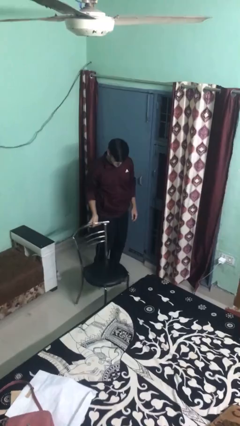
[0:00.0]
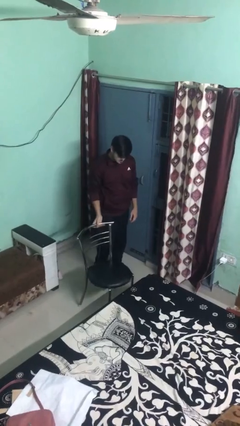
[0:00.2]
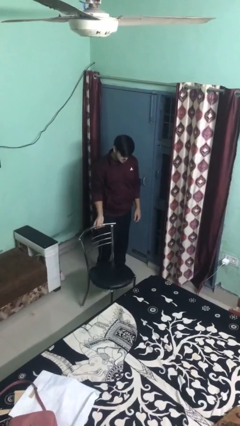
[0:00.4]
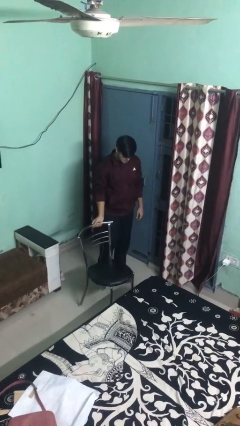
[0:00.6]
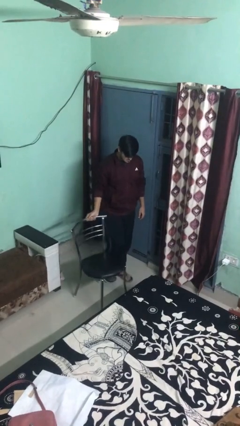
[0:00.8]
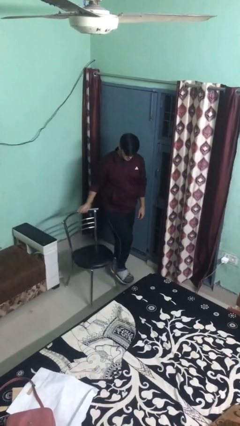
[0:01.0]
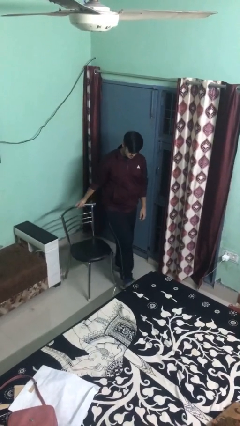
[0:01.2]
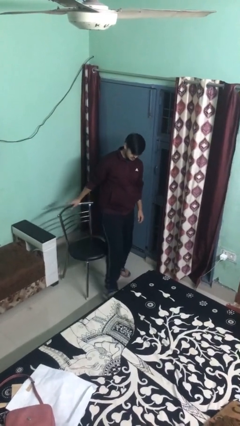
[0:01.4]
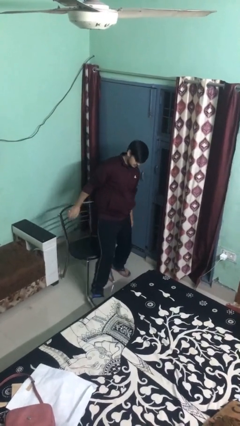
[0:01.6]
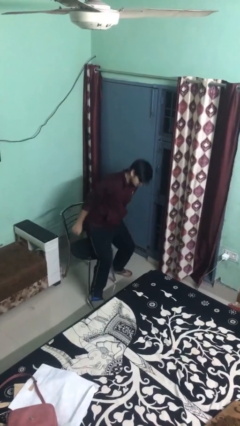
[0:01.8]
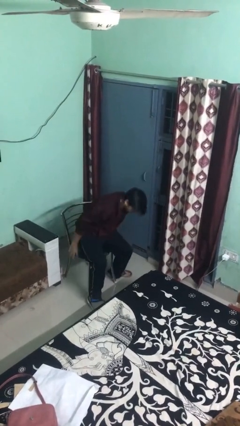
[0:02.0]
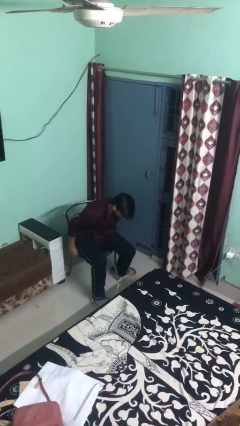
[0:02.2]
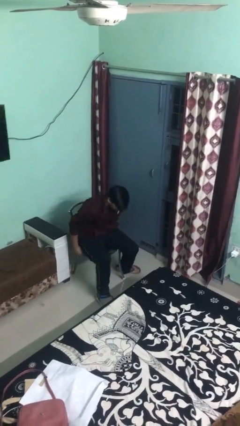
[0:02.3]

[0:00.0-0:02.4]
person sits down

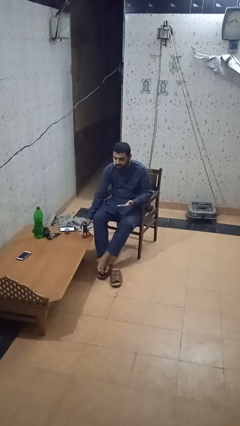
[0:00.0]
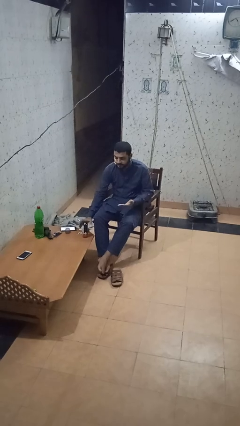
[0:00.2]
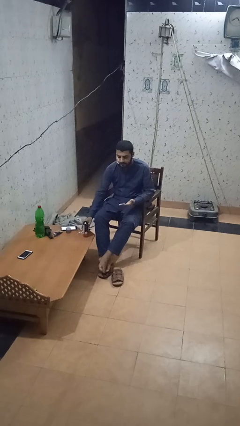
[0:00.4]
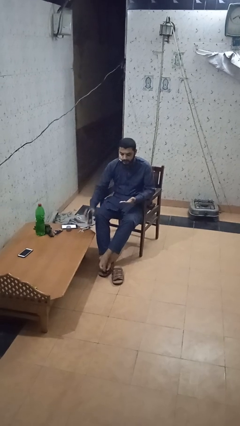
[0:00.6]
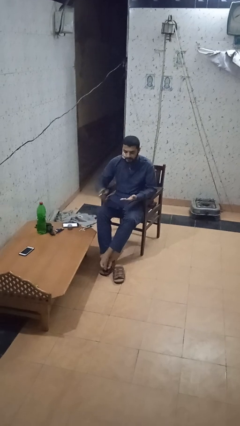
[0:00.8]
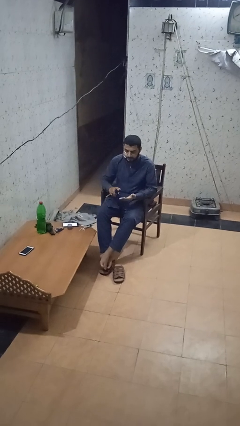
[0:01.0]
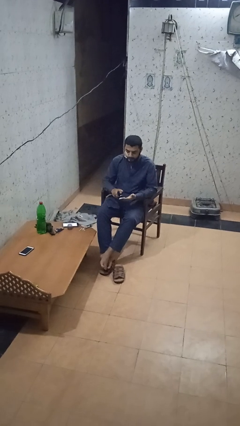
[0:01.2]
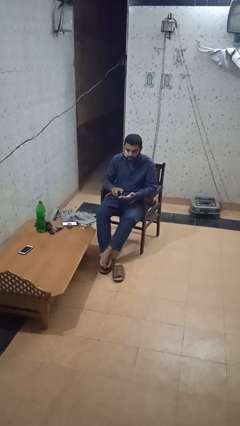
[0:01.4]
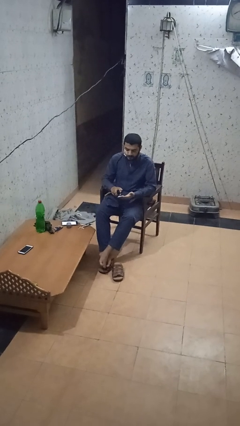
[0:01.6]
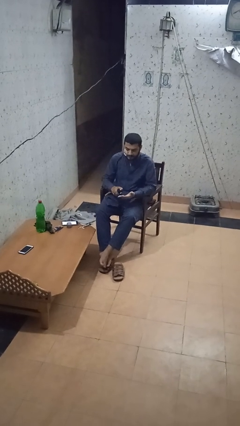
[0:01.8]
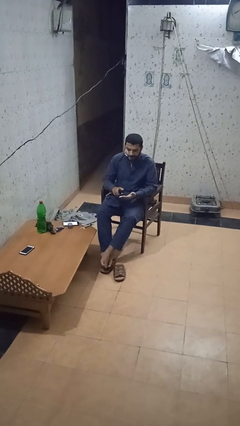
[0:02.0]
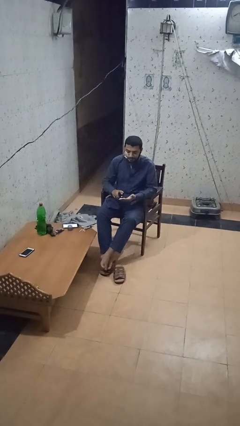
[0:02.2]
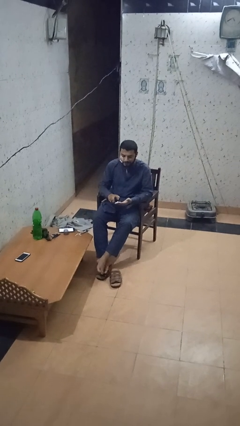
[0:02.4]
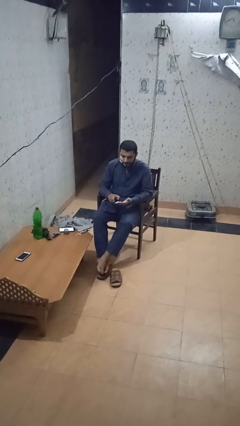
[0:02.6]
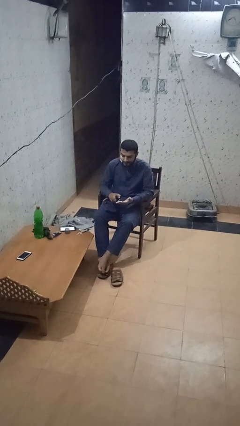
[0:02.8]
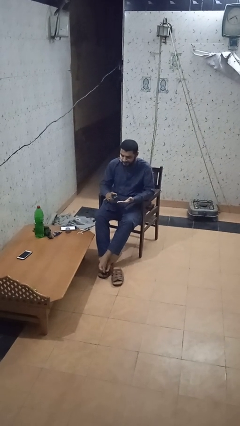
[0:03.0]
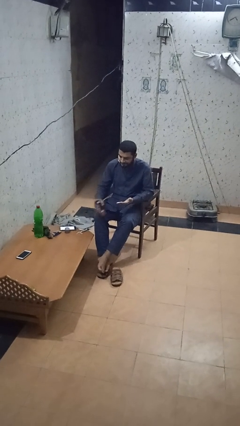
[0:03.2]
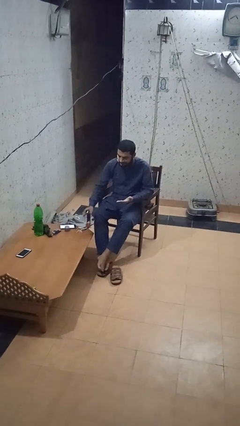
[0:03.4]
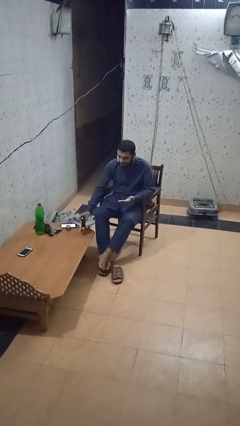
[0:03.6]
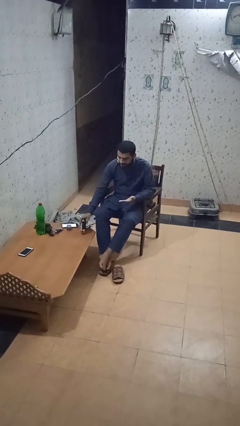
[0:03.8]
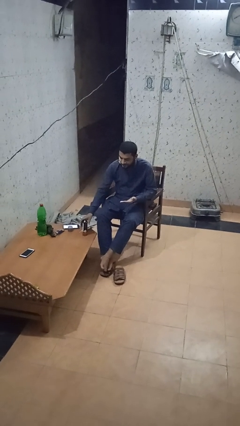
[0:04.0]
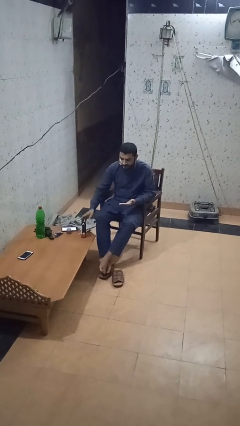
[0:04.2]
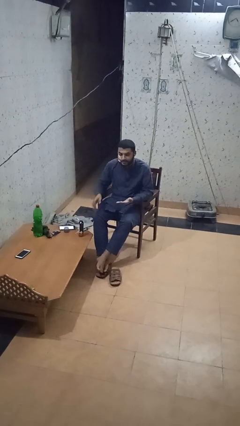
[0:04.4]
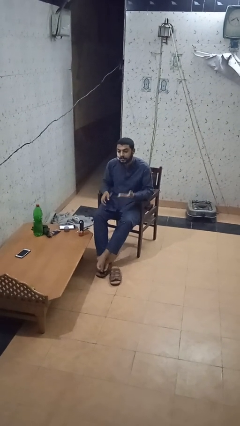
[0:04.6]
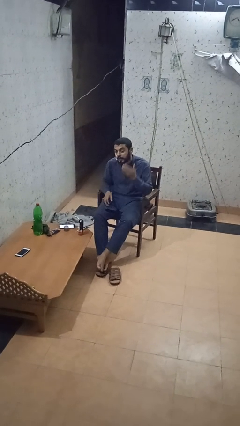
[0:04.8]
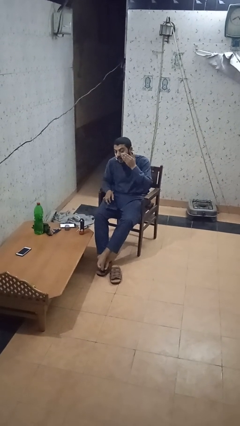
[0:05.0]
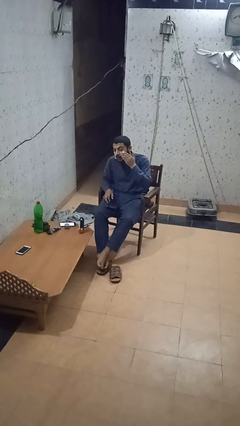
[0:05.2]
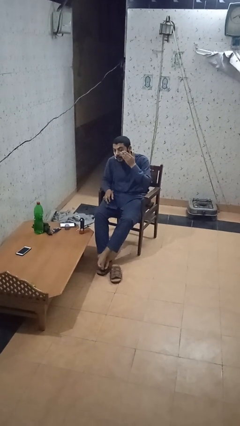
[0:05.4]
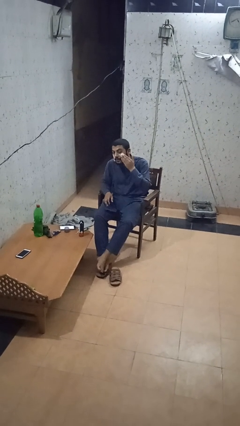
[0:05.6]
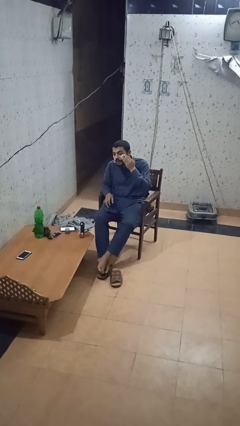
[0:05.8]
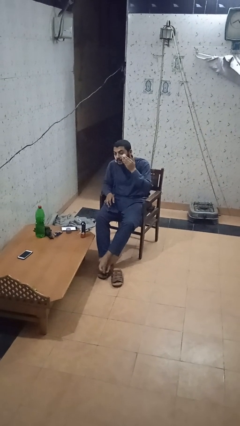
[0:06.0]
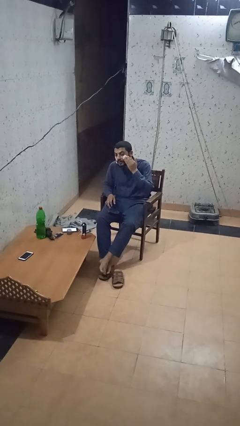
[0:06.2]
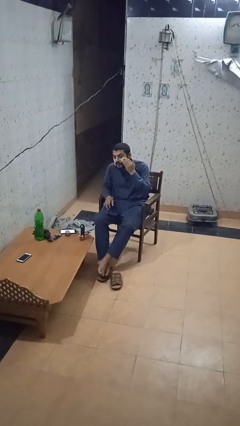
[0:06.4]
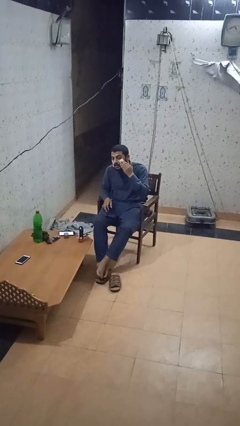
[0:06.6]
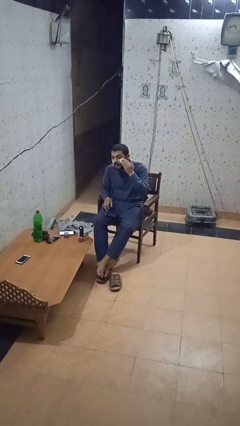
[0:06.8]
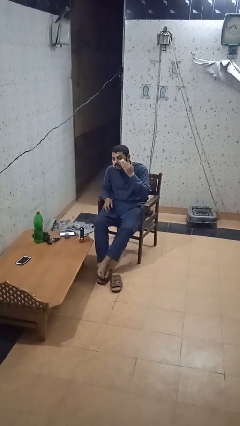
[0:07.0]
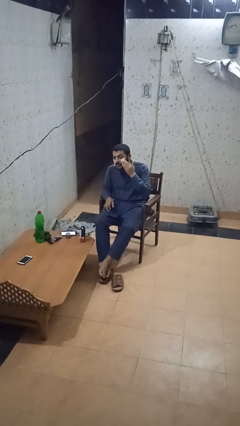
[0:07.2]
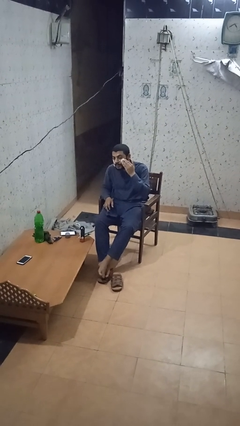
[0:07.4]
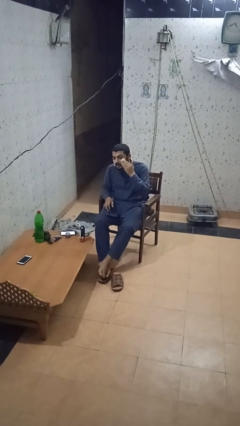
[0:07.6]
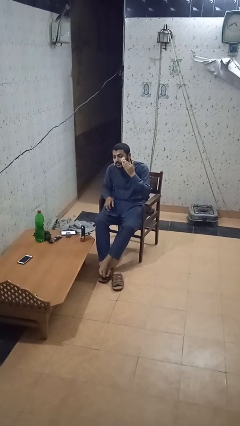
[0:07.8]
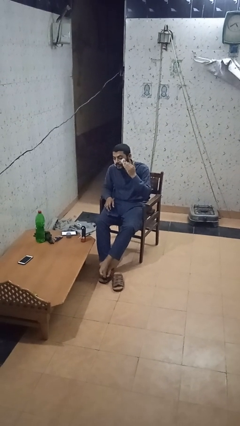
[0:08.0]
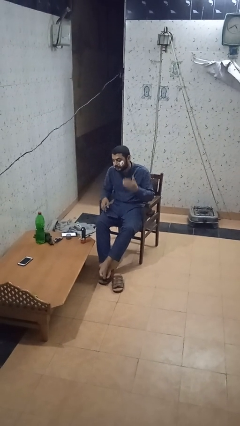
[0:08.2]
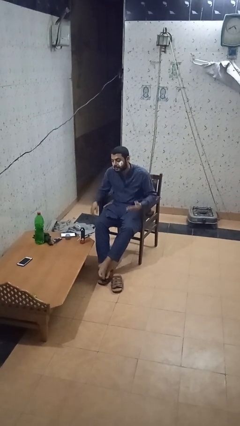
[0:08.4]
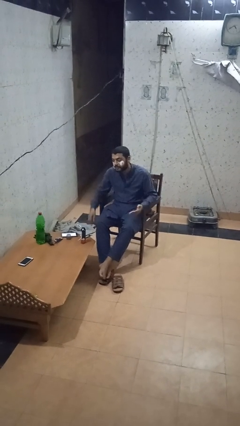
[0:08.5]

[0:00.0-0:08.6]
person applies shaving cream

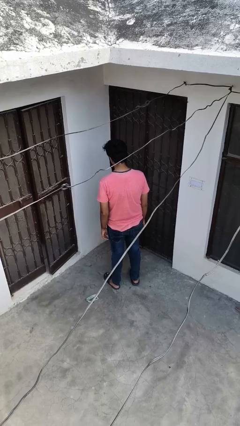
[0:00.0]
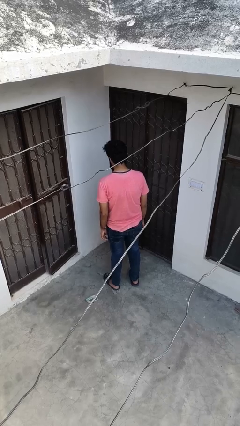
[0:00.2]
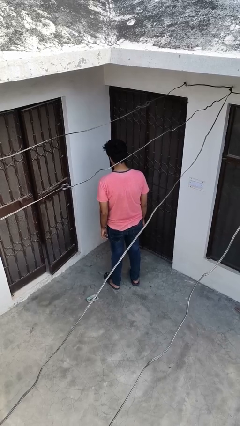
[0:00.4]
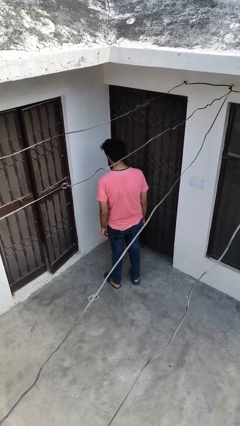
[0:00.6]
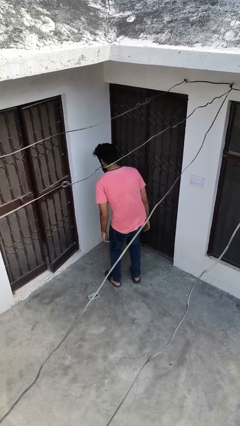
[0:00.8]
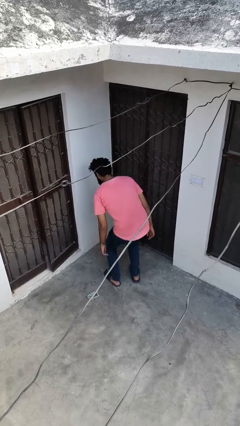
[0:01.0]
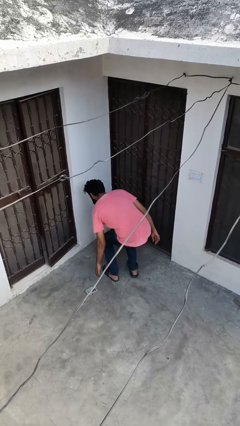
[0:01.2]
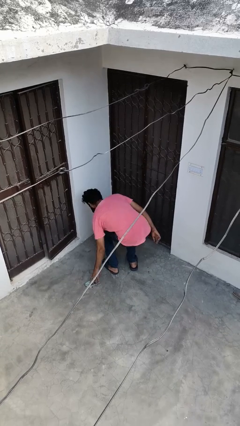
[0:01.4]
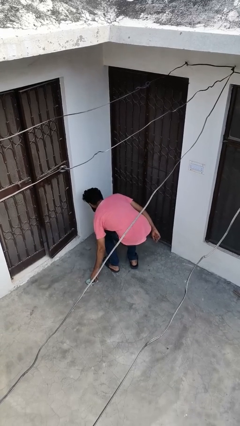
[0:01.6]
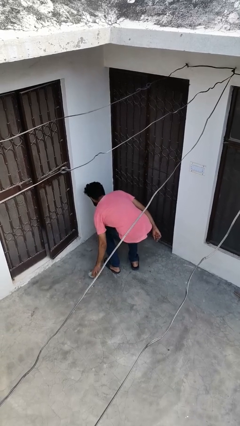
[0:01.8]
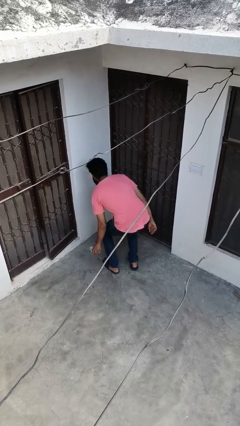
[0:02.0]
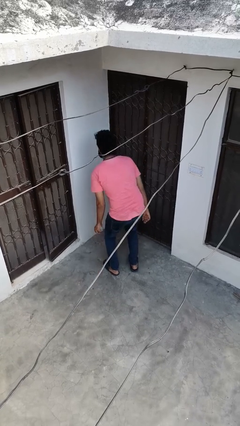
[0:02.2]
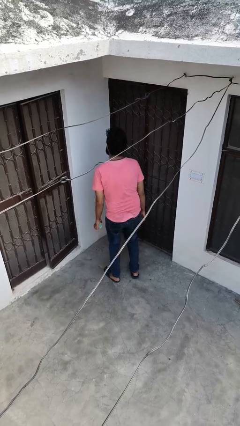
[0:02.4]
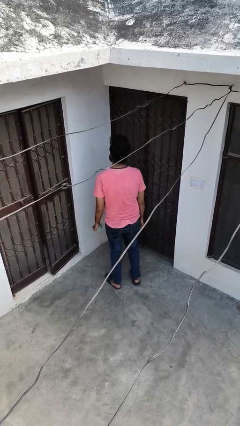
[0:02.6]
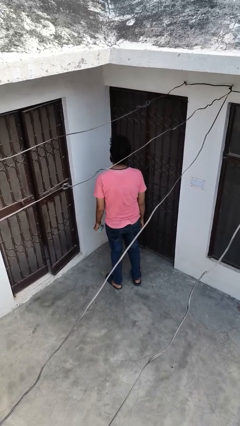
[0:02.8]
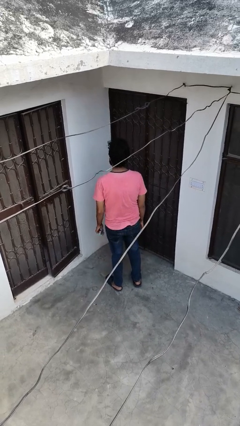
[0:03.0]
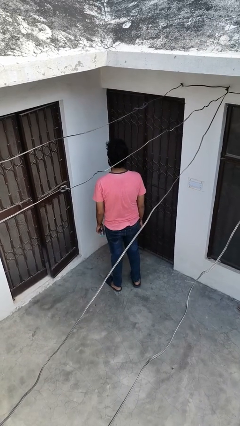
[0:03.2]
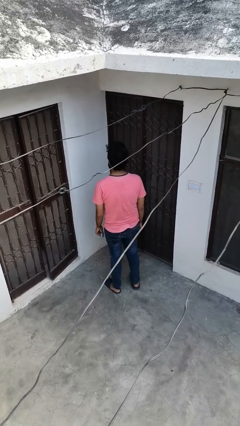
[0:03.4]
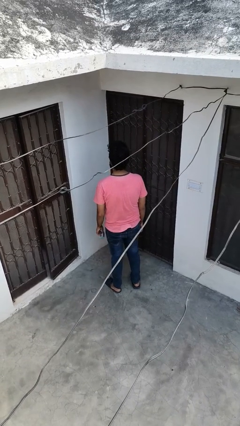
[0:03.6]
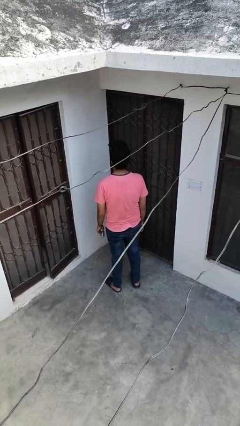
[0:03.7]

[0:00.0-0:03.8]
person picks up object from floor

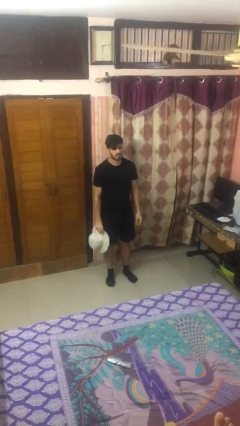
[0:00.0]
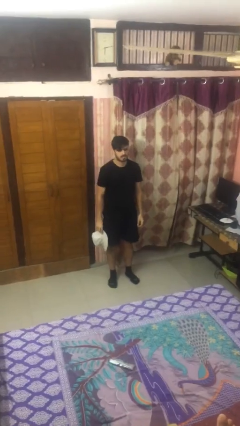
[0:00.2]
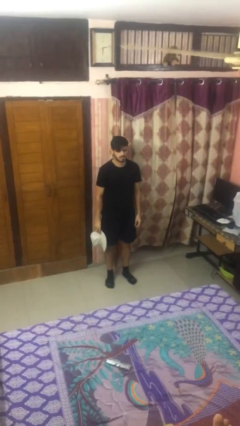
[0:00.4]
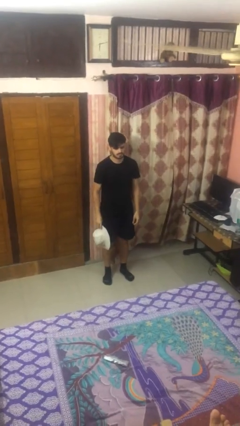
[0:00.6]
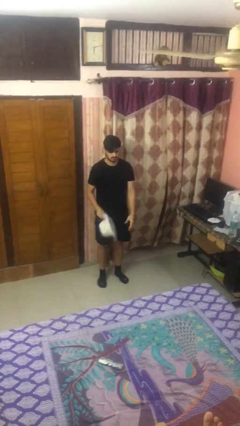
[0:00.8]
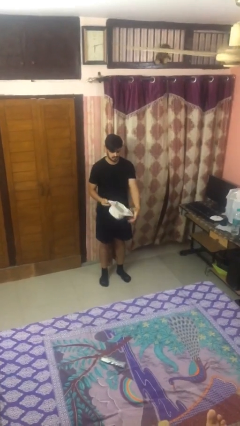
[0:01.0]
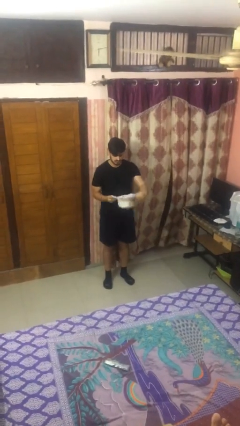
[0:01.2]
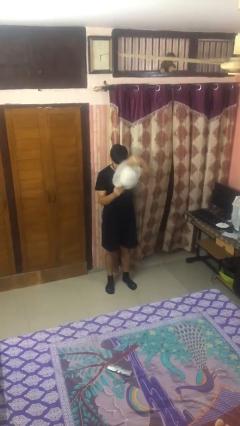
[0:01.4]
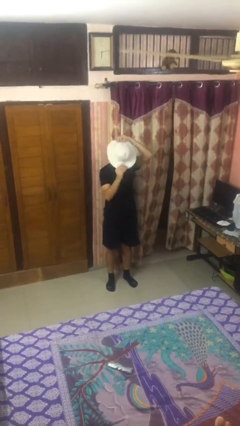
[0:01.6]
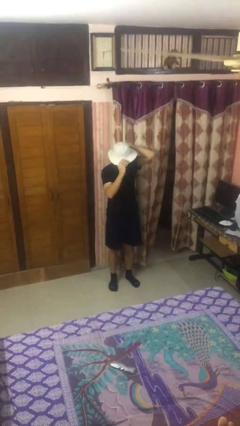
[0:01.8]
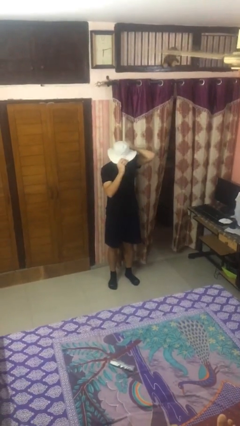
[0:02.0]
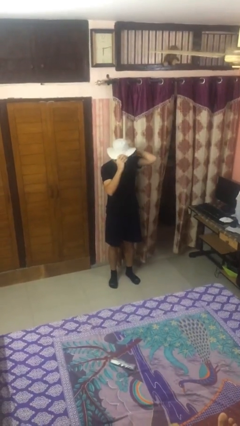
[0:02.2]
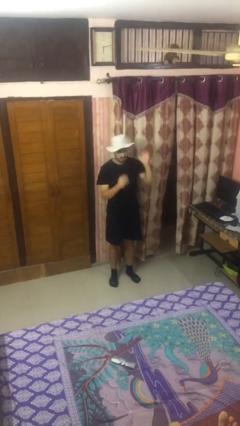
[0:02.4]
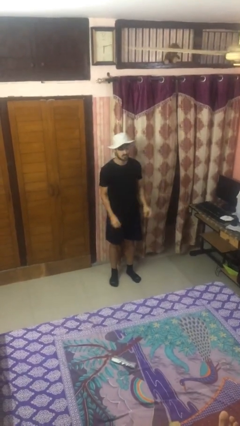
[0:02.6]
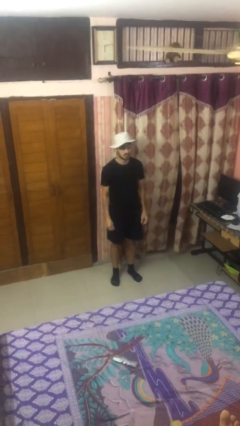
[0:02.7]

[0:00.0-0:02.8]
person puts on hat
